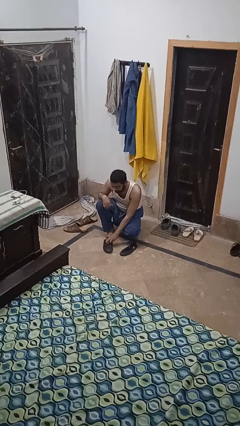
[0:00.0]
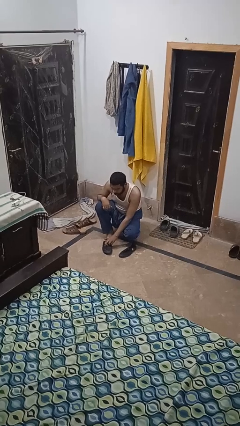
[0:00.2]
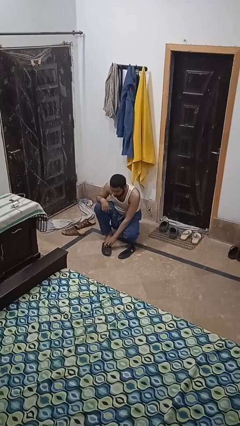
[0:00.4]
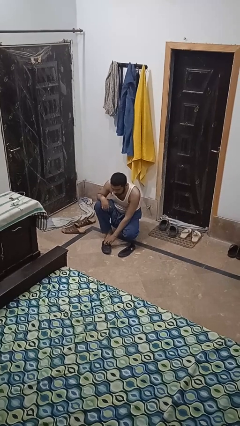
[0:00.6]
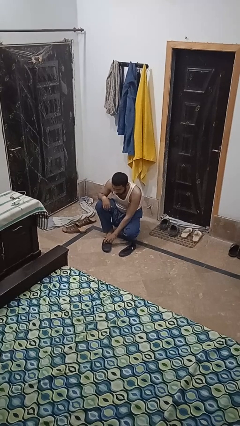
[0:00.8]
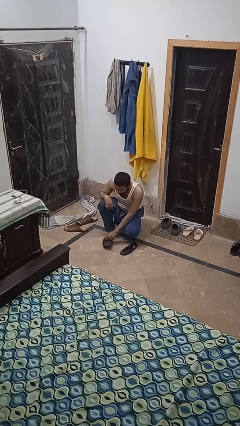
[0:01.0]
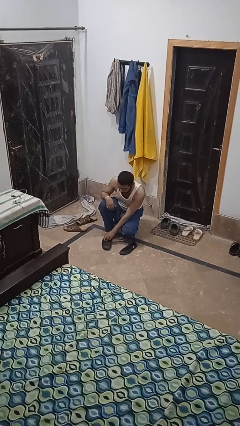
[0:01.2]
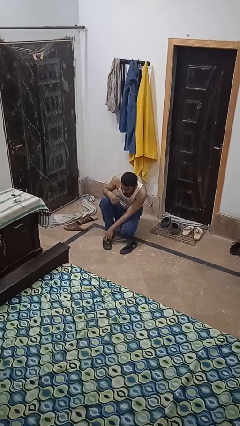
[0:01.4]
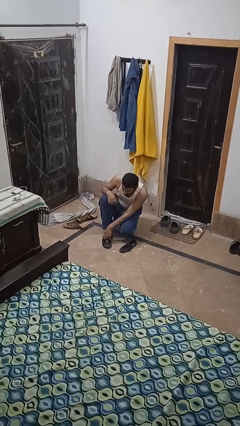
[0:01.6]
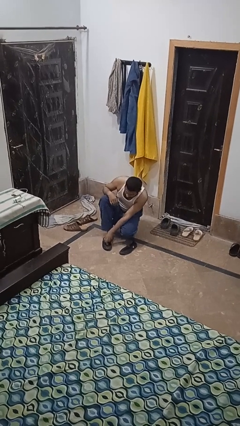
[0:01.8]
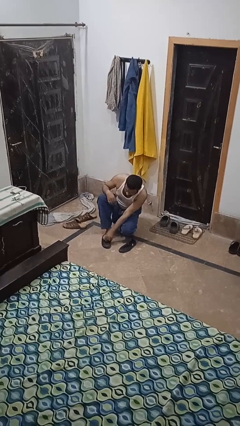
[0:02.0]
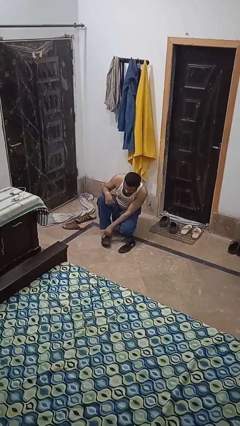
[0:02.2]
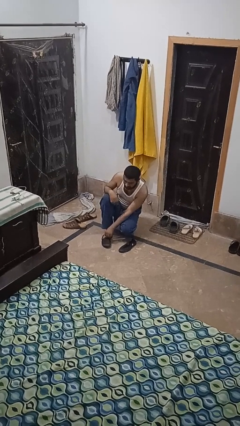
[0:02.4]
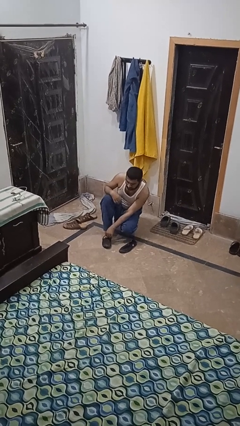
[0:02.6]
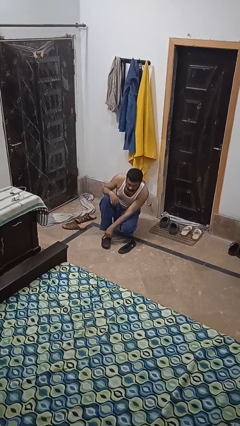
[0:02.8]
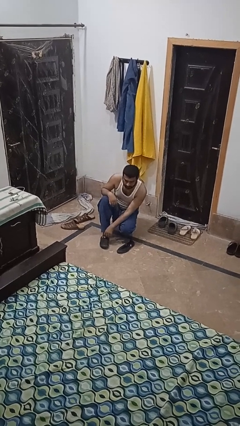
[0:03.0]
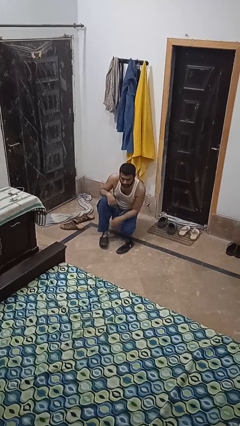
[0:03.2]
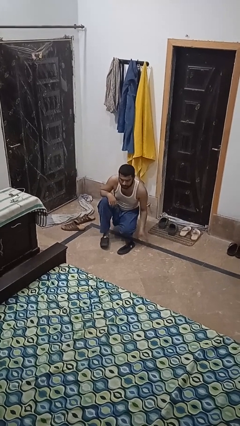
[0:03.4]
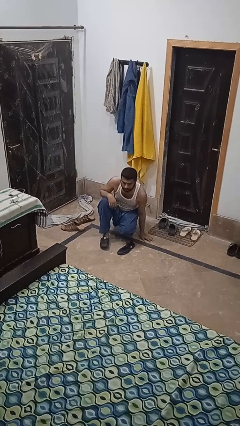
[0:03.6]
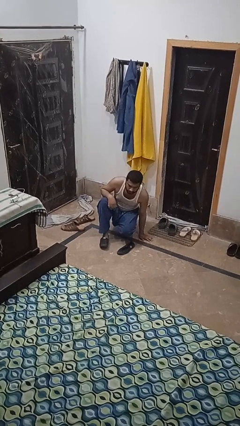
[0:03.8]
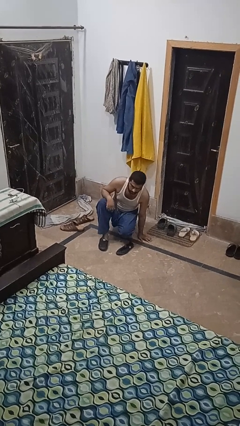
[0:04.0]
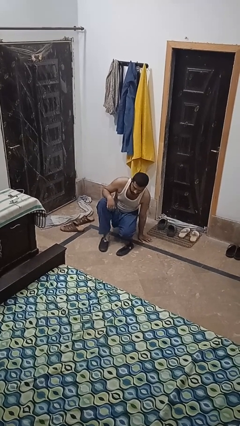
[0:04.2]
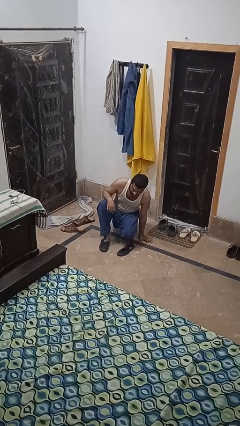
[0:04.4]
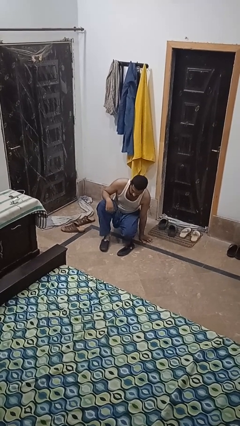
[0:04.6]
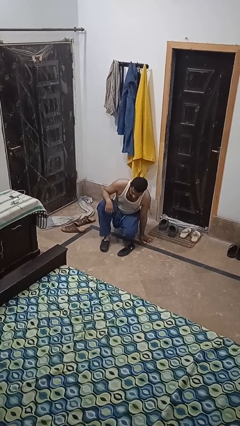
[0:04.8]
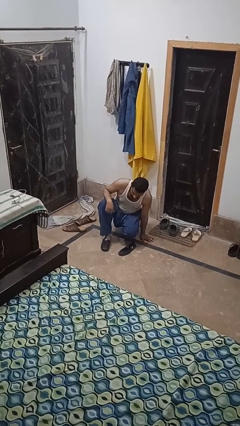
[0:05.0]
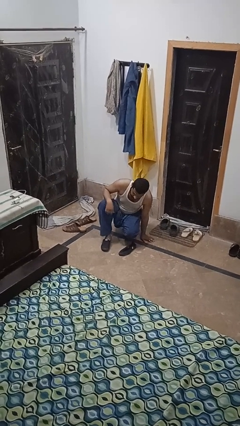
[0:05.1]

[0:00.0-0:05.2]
person puts on shoes

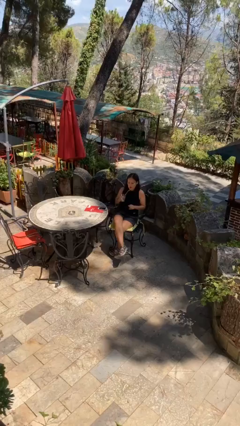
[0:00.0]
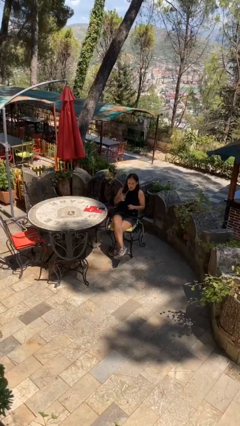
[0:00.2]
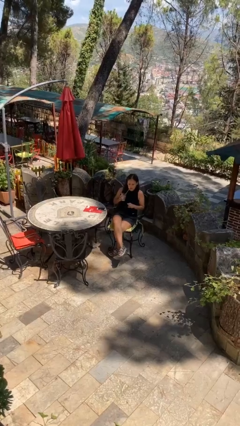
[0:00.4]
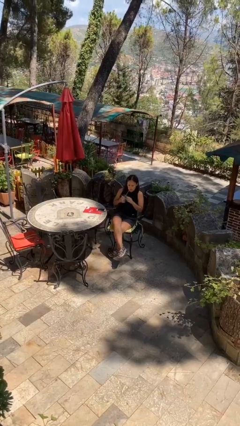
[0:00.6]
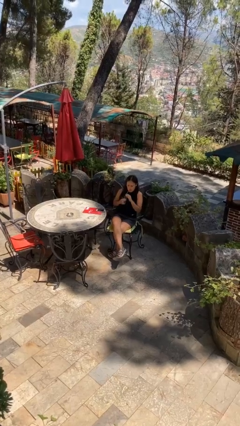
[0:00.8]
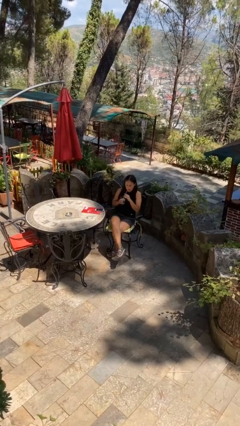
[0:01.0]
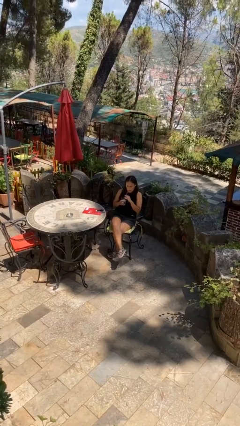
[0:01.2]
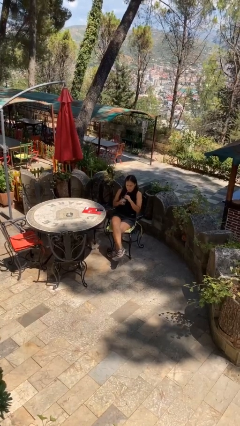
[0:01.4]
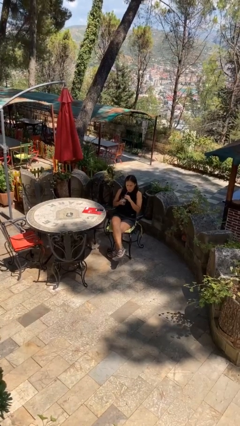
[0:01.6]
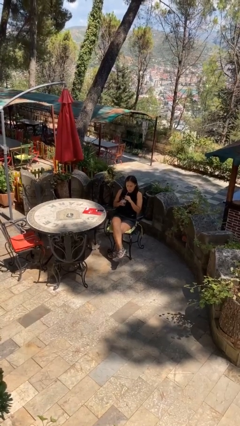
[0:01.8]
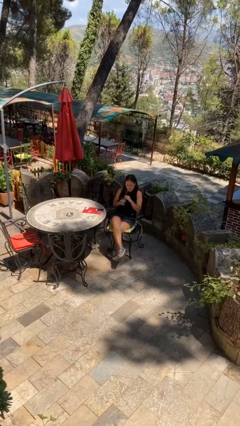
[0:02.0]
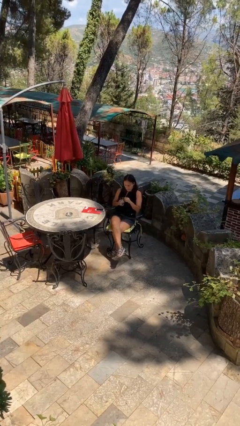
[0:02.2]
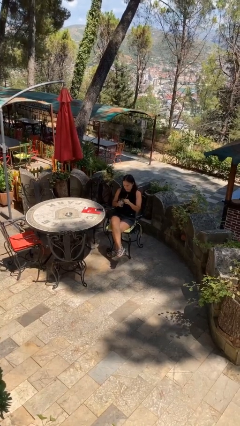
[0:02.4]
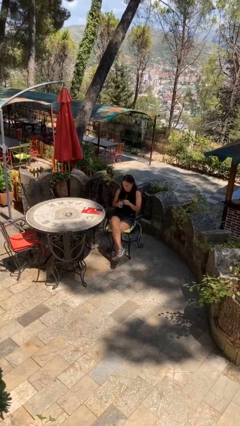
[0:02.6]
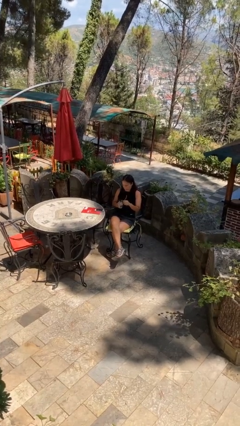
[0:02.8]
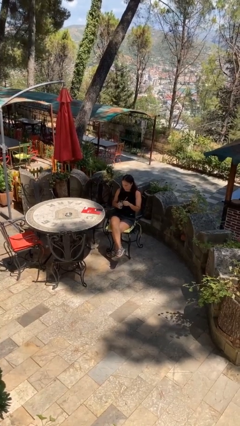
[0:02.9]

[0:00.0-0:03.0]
person drinks from straw

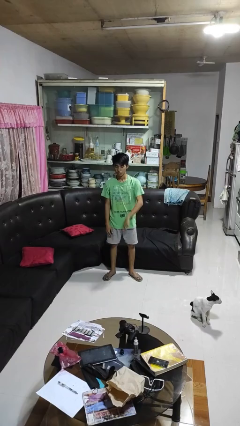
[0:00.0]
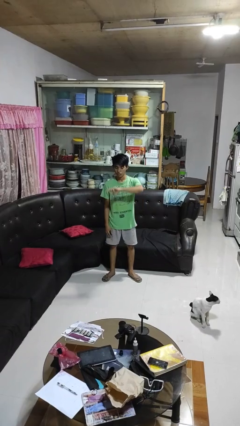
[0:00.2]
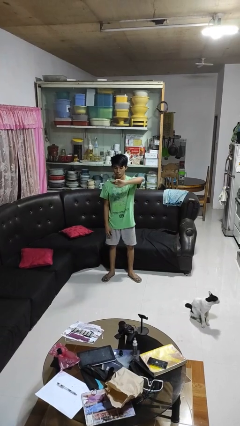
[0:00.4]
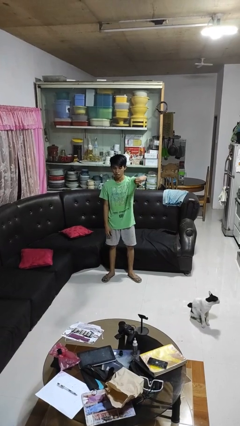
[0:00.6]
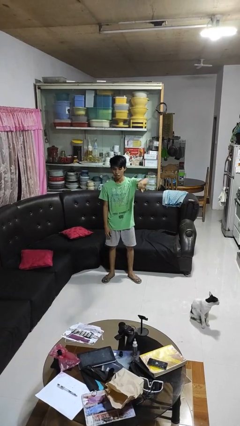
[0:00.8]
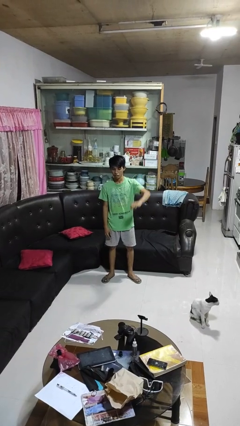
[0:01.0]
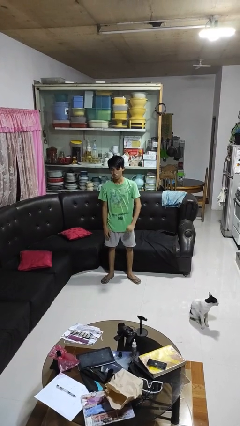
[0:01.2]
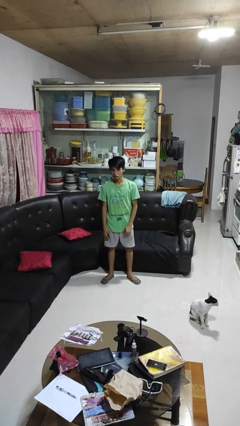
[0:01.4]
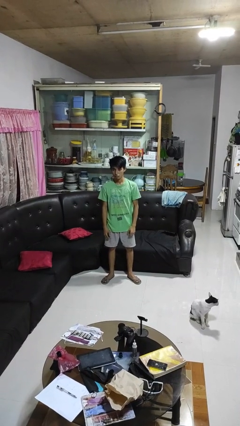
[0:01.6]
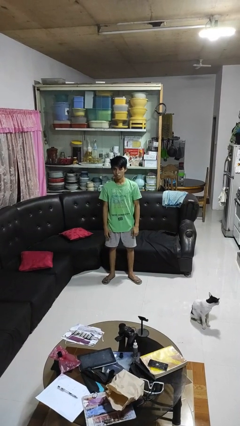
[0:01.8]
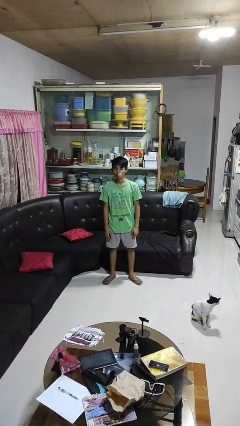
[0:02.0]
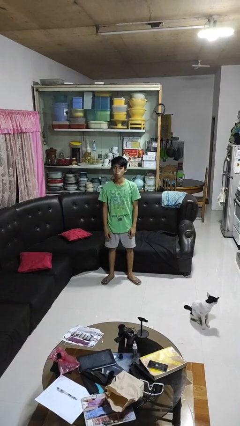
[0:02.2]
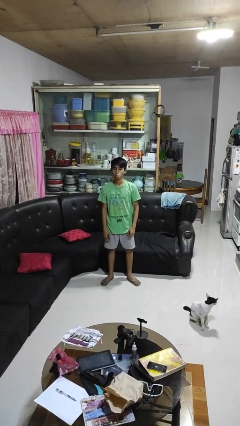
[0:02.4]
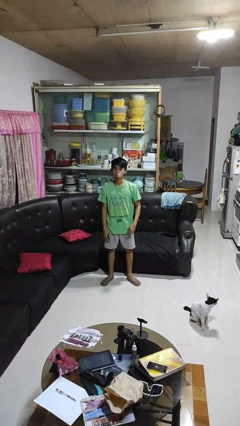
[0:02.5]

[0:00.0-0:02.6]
person gestures swipe left

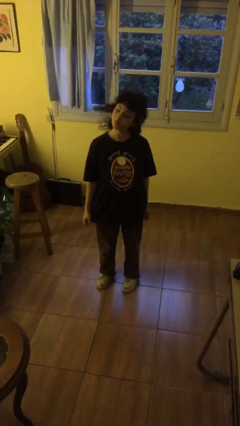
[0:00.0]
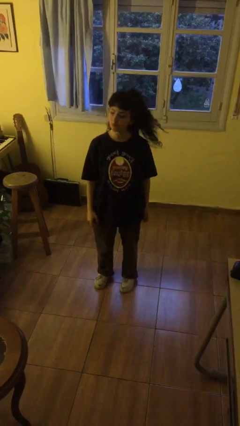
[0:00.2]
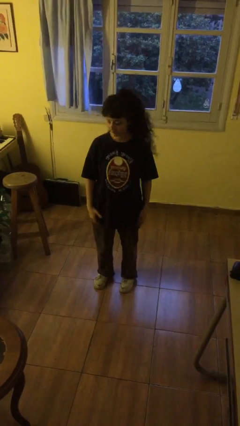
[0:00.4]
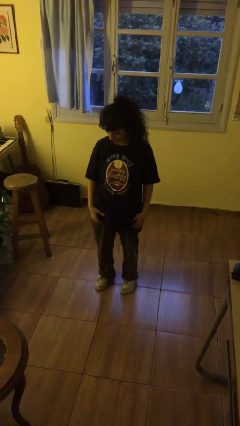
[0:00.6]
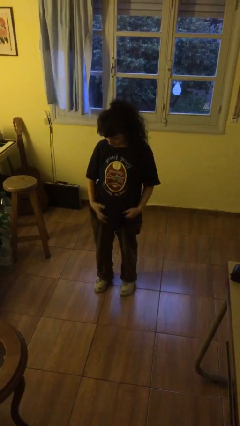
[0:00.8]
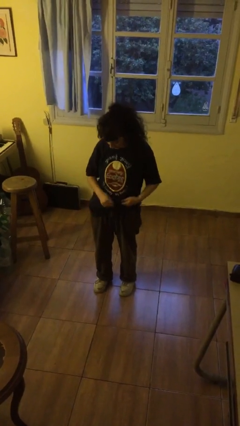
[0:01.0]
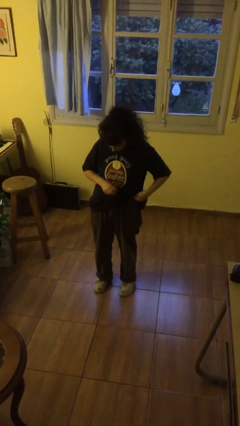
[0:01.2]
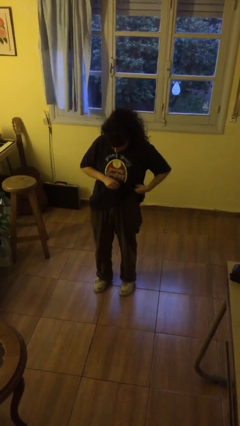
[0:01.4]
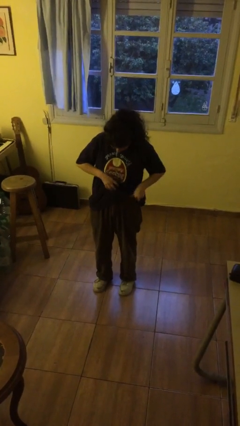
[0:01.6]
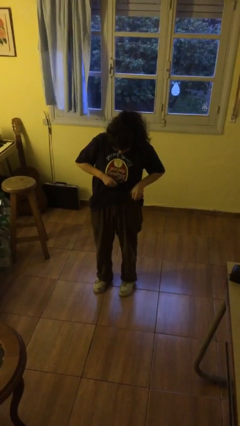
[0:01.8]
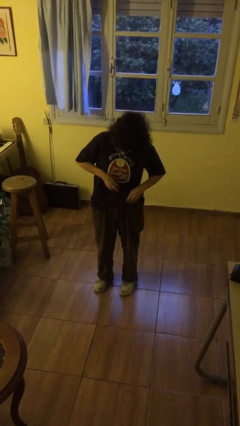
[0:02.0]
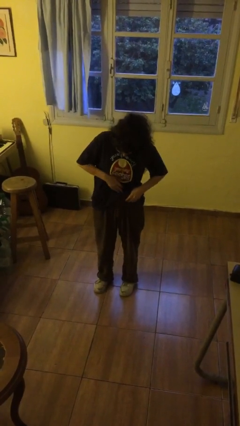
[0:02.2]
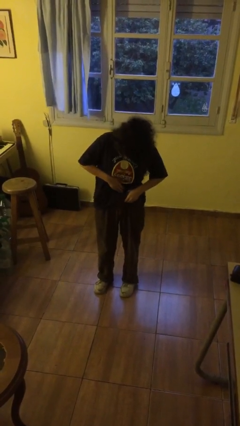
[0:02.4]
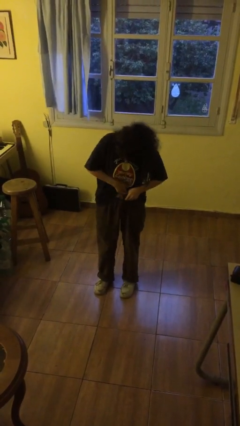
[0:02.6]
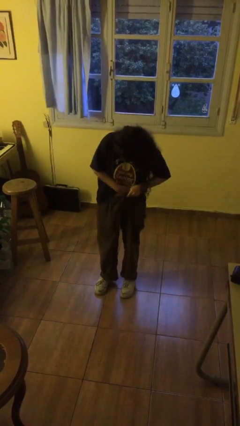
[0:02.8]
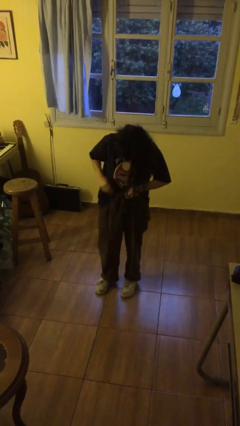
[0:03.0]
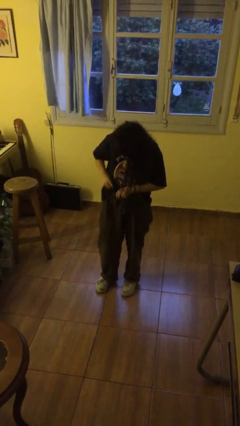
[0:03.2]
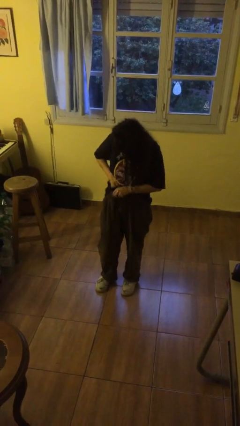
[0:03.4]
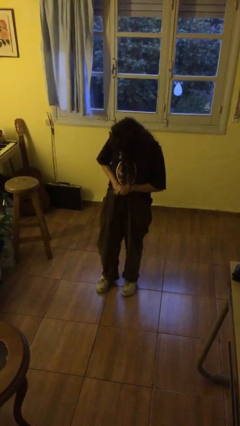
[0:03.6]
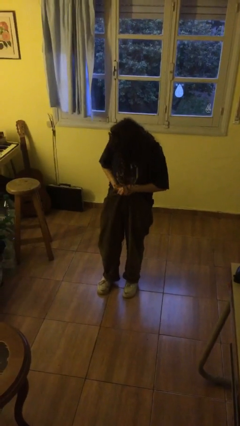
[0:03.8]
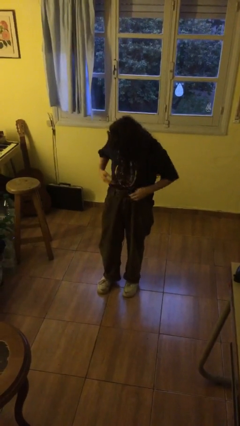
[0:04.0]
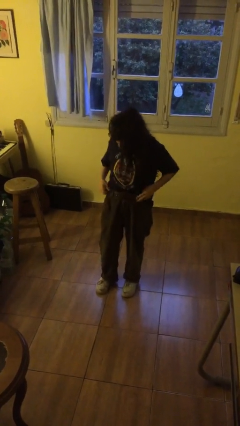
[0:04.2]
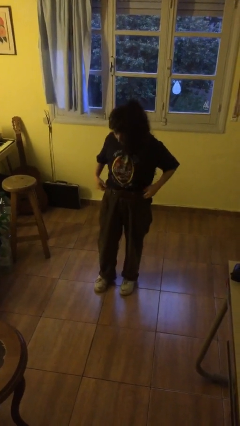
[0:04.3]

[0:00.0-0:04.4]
person tucks in shirt

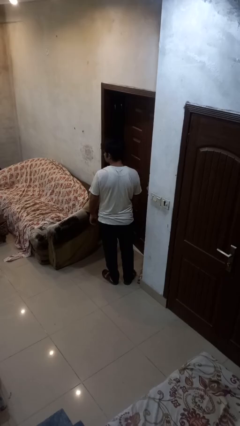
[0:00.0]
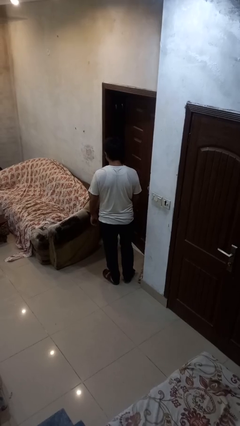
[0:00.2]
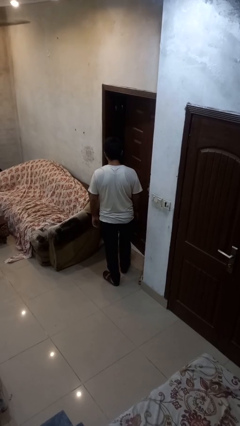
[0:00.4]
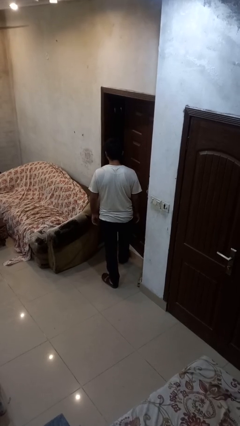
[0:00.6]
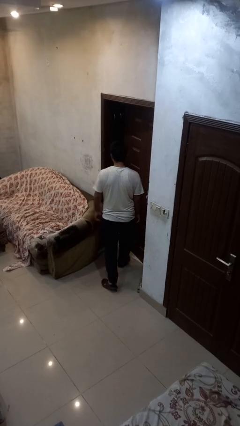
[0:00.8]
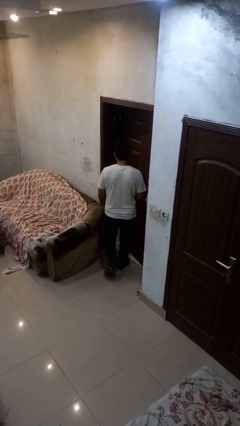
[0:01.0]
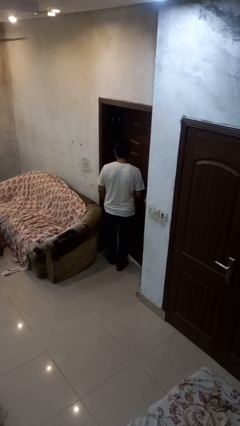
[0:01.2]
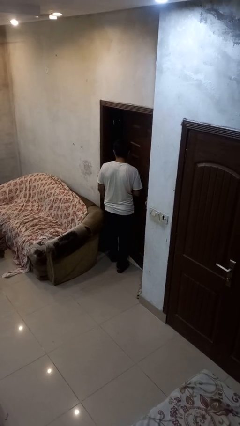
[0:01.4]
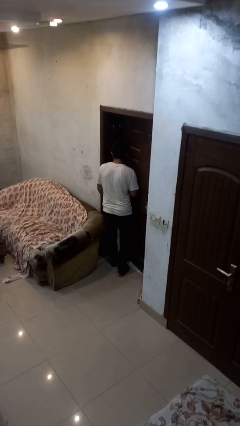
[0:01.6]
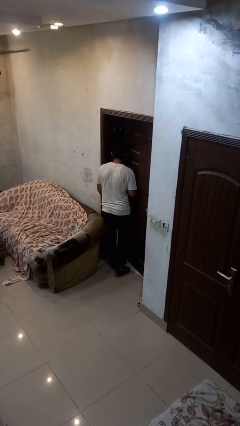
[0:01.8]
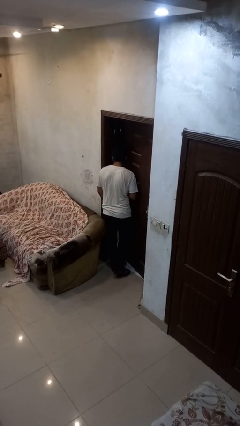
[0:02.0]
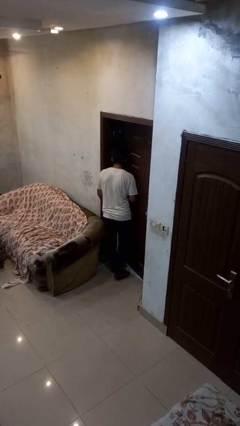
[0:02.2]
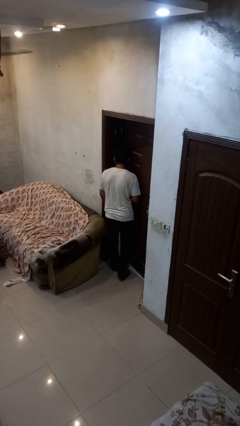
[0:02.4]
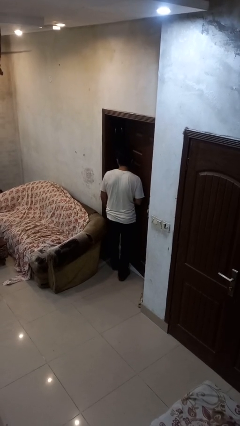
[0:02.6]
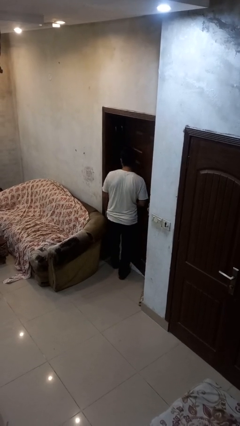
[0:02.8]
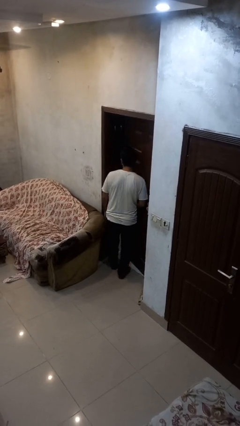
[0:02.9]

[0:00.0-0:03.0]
person bumps into wall
